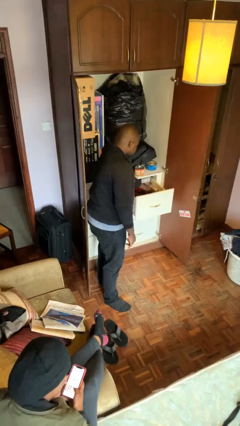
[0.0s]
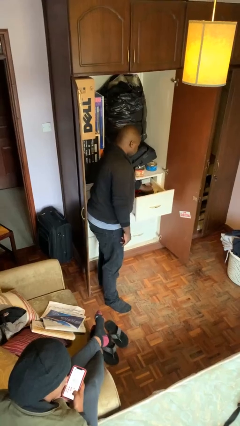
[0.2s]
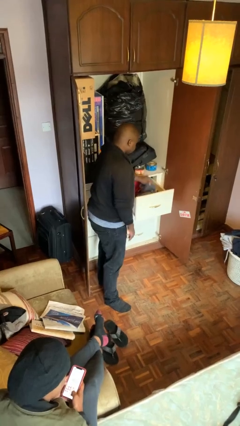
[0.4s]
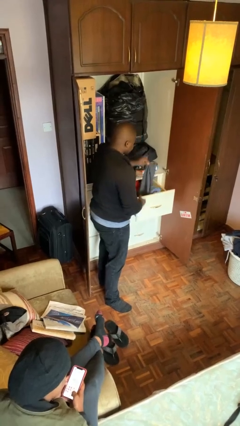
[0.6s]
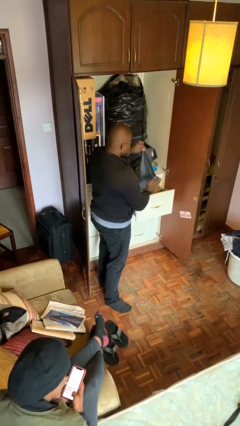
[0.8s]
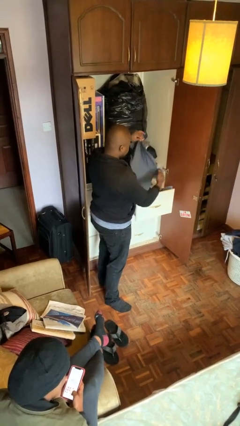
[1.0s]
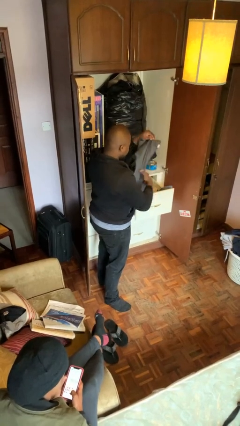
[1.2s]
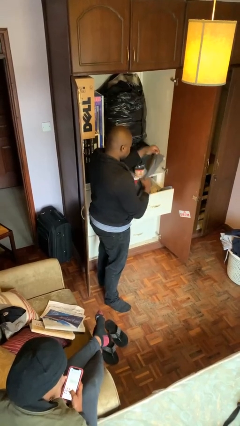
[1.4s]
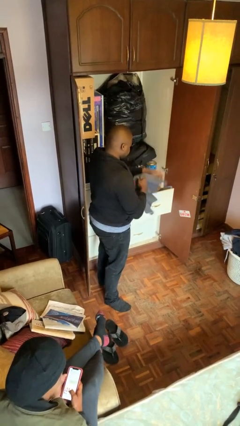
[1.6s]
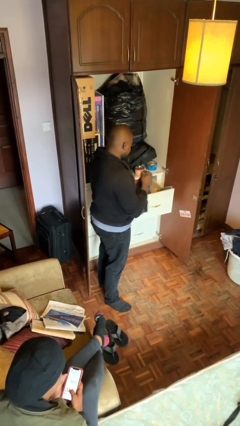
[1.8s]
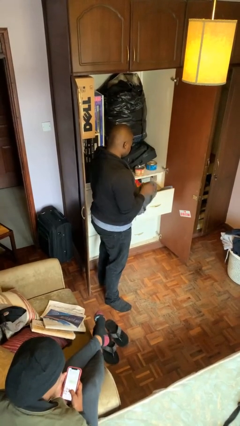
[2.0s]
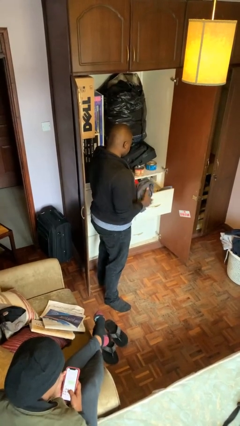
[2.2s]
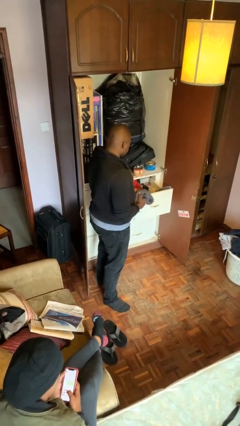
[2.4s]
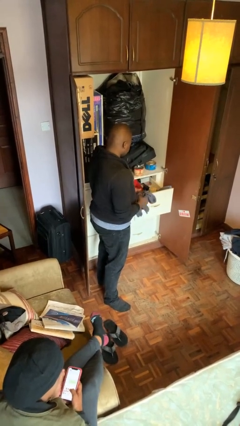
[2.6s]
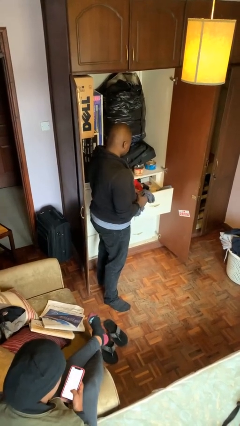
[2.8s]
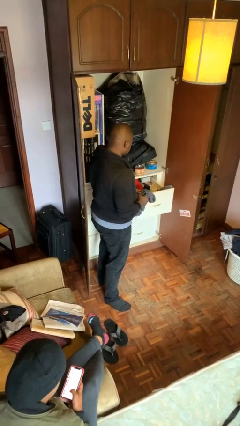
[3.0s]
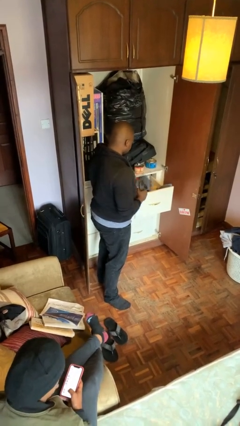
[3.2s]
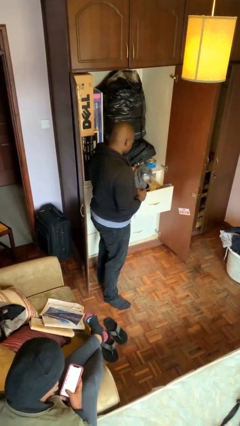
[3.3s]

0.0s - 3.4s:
person takes clothes from dresser

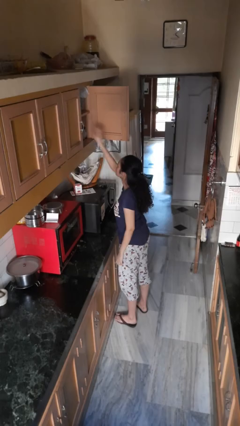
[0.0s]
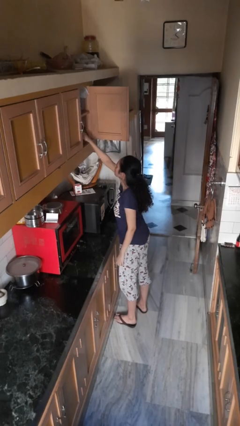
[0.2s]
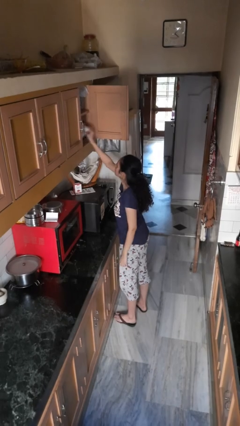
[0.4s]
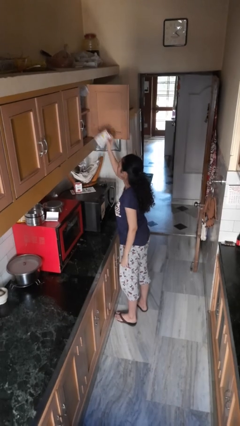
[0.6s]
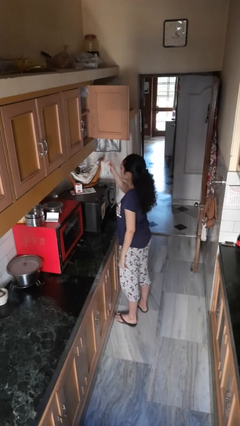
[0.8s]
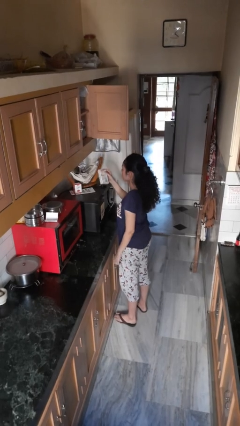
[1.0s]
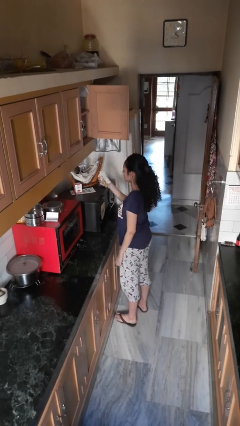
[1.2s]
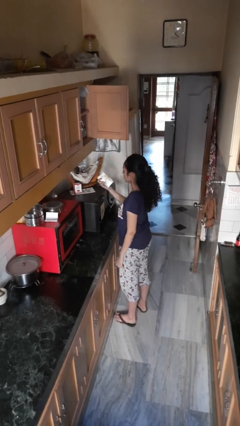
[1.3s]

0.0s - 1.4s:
person takes object from cabinet

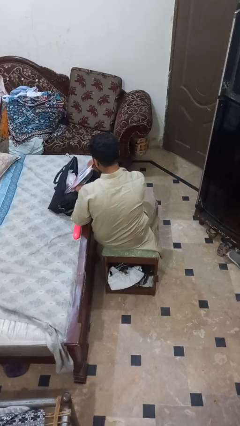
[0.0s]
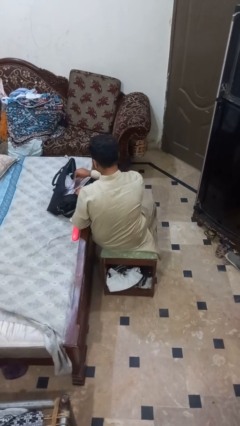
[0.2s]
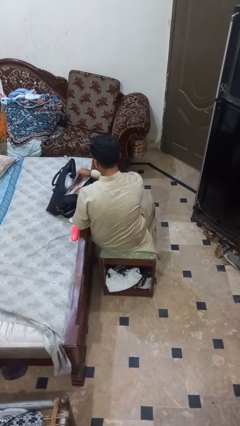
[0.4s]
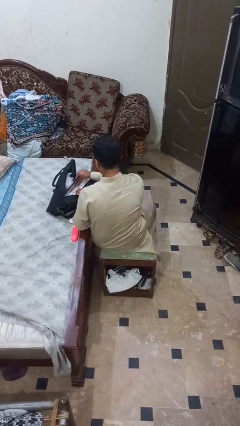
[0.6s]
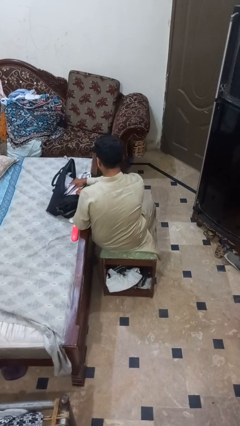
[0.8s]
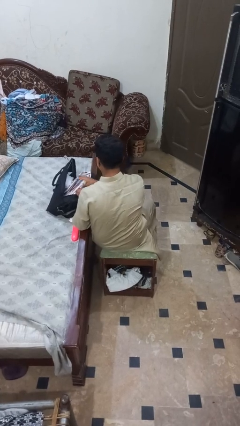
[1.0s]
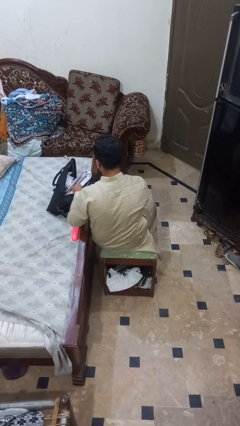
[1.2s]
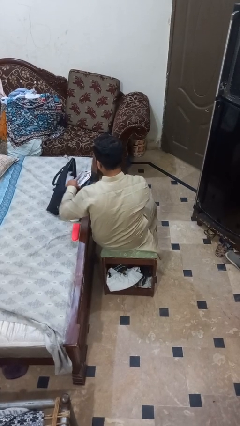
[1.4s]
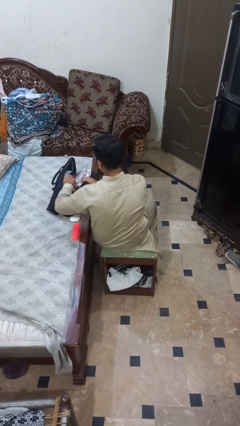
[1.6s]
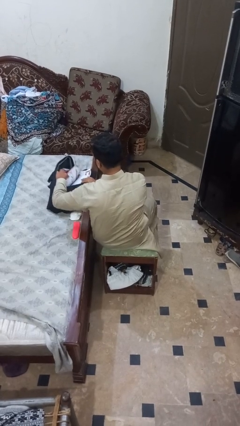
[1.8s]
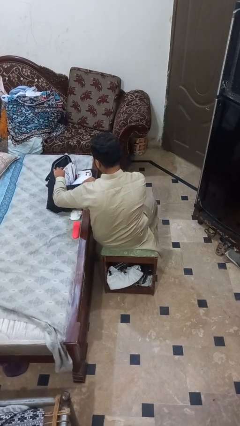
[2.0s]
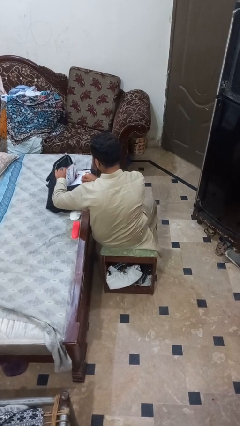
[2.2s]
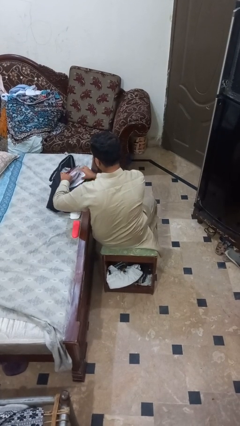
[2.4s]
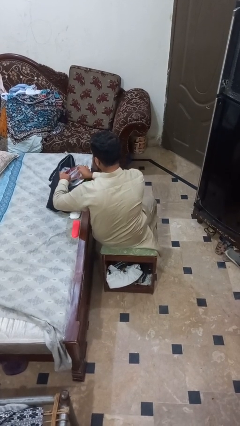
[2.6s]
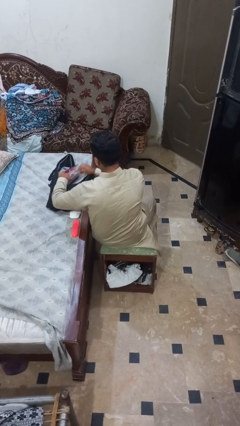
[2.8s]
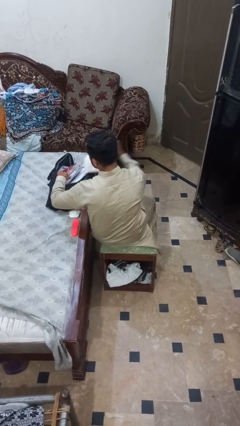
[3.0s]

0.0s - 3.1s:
person searches in bag

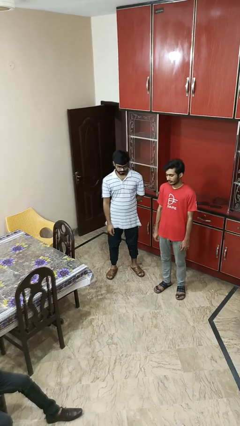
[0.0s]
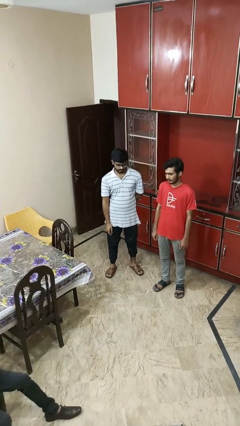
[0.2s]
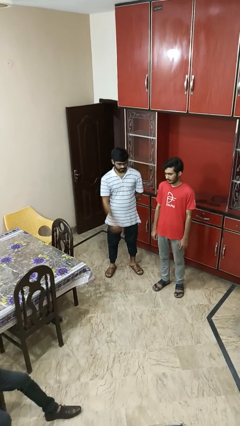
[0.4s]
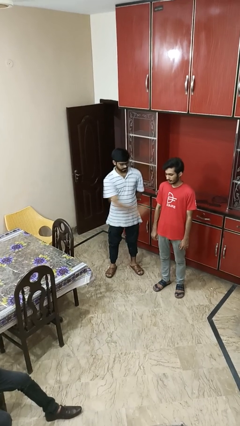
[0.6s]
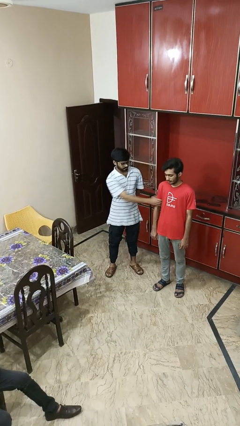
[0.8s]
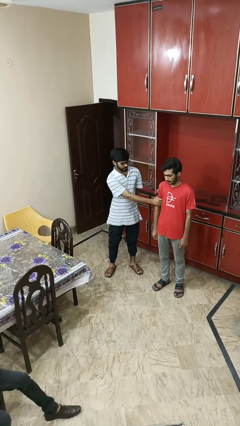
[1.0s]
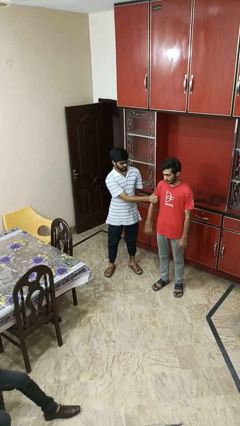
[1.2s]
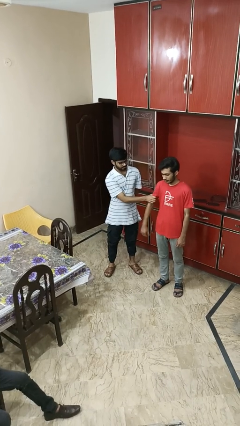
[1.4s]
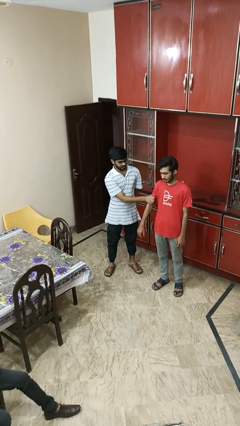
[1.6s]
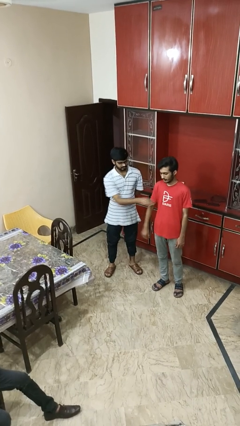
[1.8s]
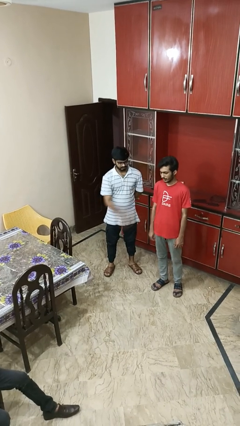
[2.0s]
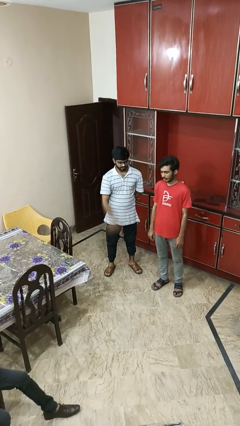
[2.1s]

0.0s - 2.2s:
person grabs person by bicep

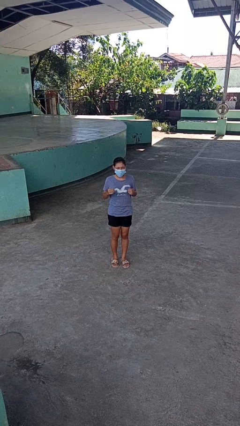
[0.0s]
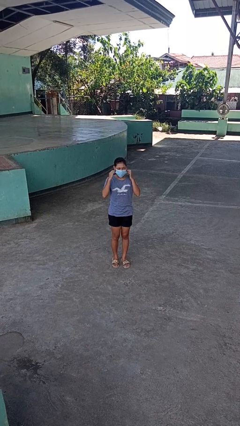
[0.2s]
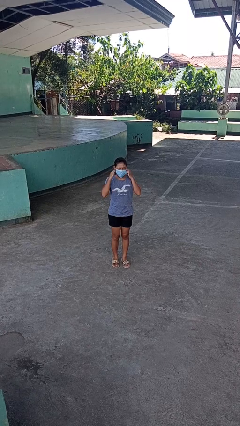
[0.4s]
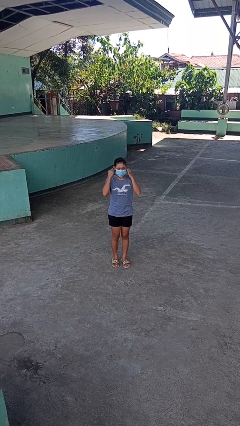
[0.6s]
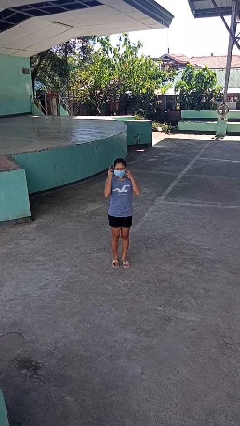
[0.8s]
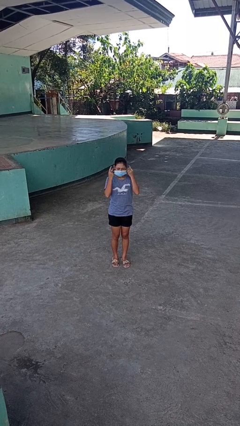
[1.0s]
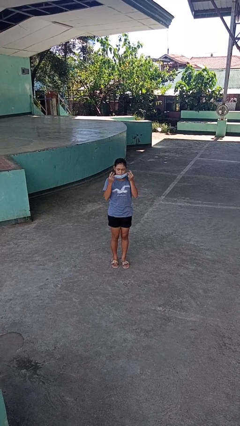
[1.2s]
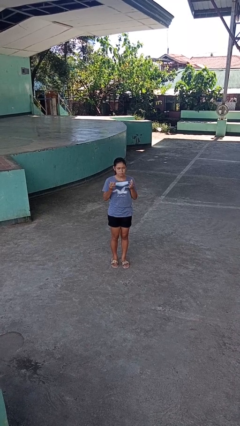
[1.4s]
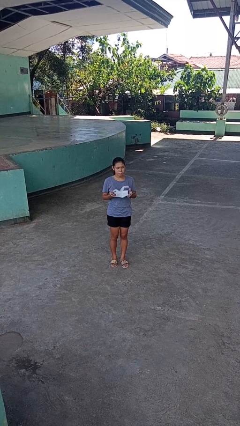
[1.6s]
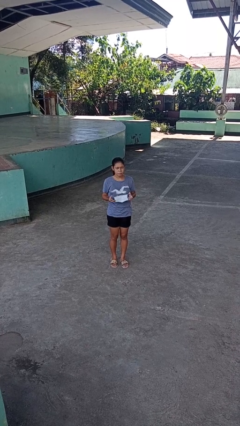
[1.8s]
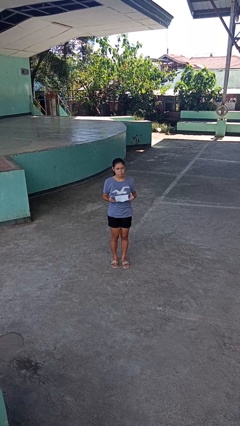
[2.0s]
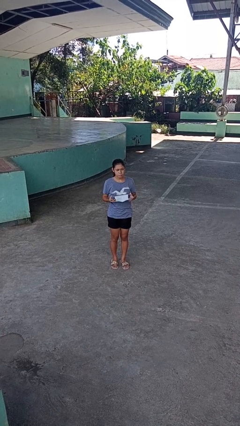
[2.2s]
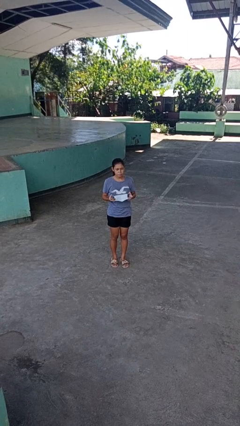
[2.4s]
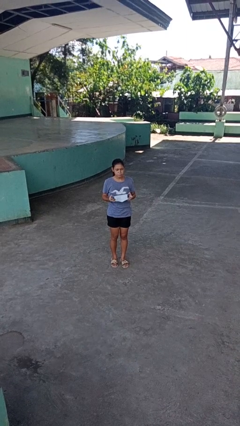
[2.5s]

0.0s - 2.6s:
person takes off facemask

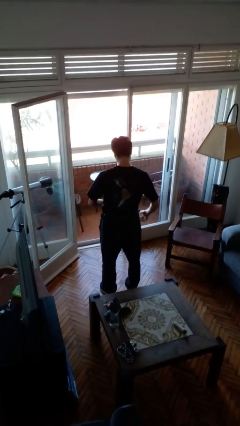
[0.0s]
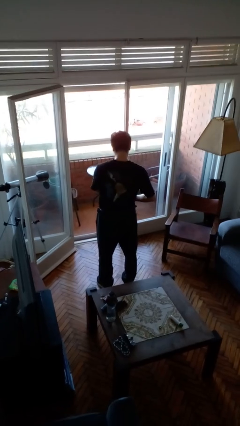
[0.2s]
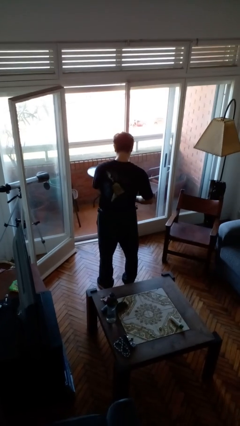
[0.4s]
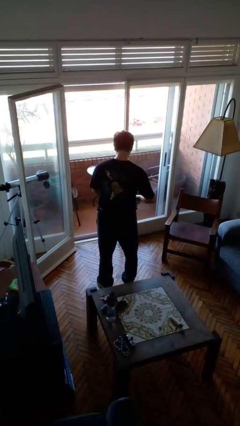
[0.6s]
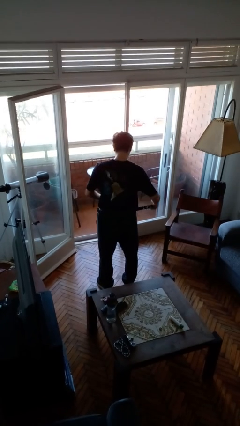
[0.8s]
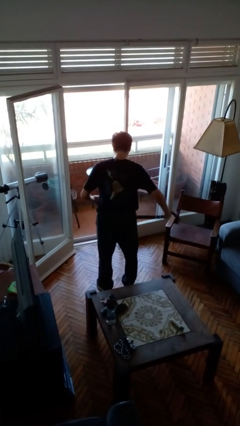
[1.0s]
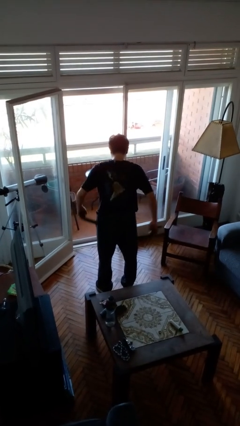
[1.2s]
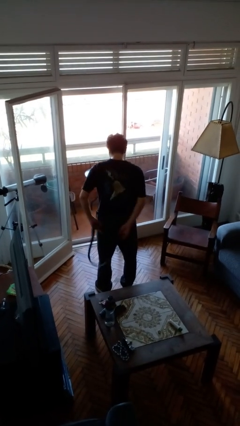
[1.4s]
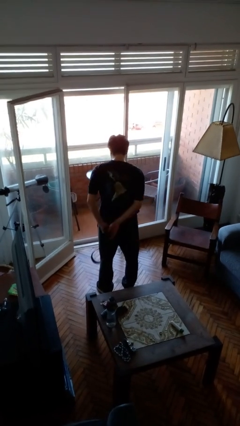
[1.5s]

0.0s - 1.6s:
person takes off belt

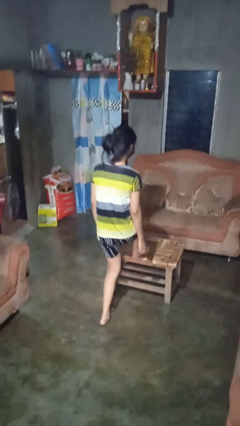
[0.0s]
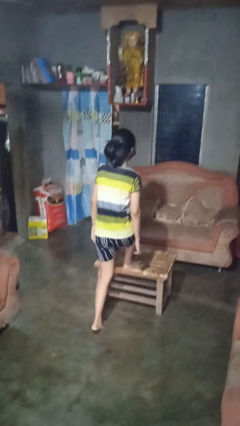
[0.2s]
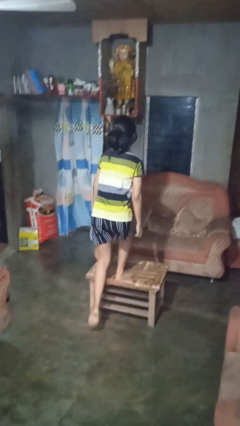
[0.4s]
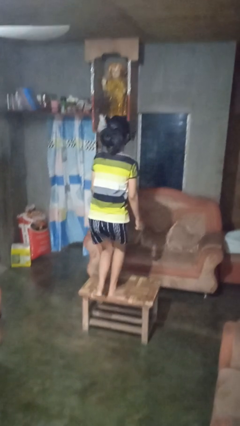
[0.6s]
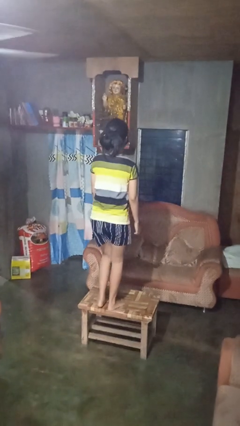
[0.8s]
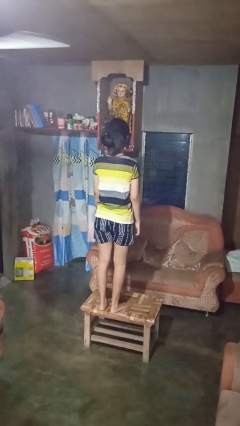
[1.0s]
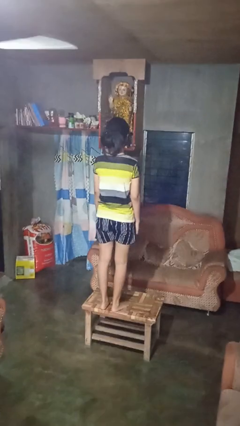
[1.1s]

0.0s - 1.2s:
person climbs on table

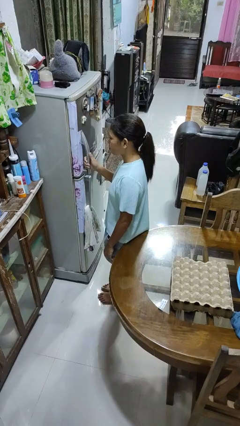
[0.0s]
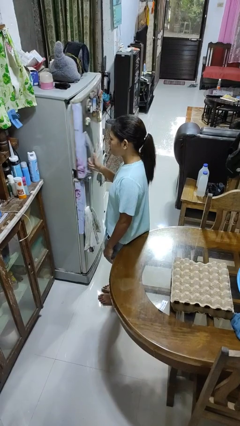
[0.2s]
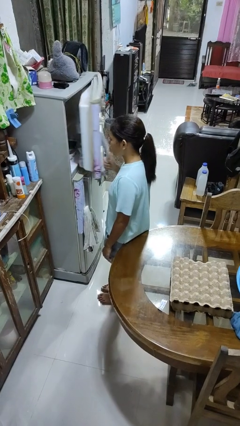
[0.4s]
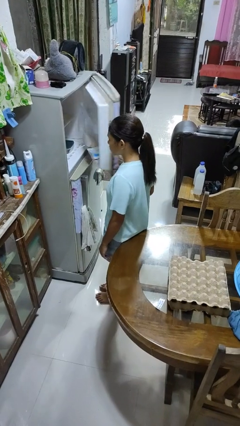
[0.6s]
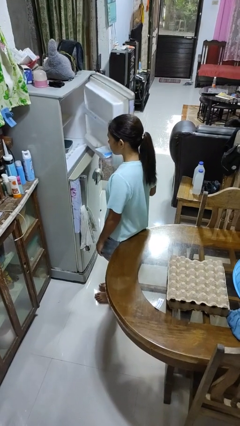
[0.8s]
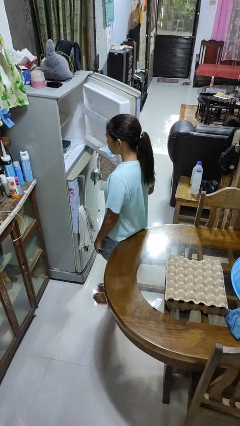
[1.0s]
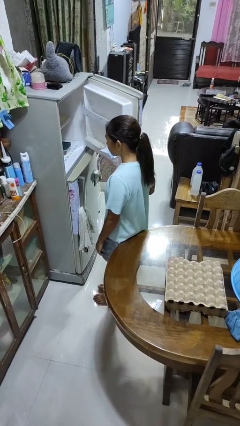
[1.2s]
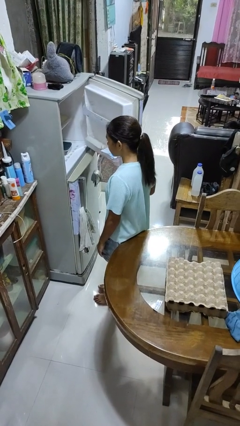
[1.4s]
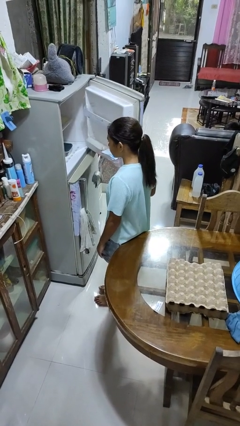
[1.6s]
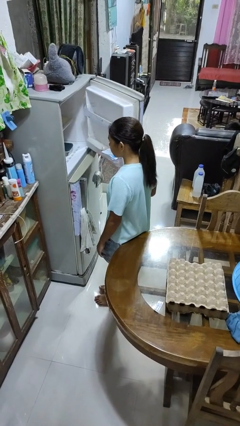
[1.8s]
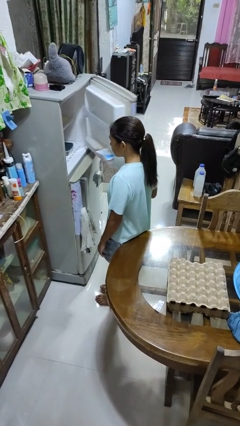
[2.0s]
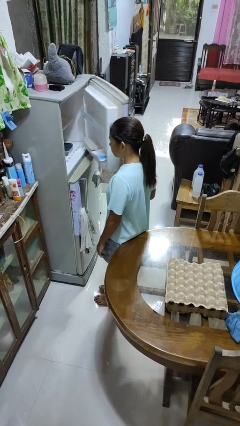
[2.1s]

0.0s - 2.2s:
person opens refrigerator
